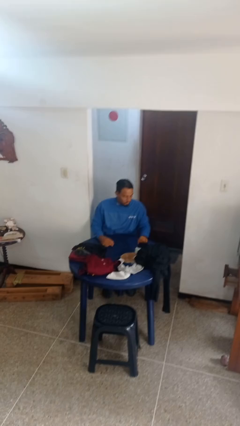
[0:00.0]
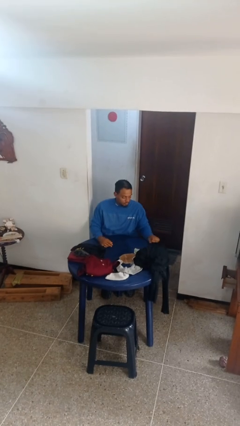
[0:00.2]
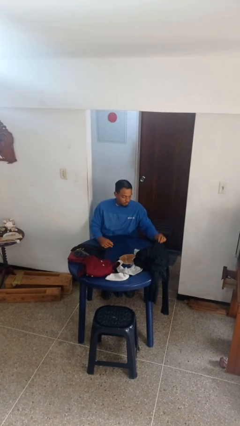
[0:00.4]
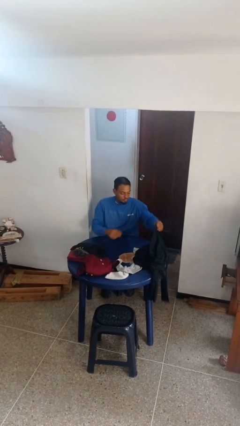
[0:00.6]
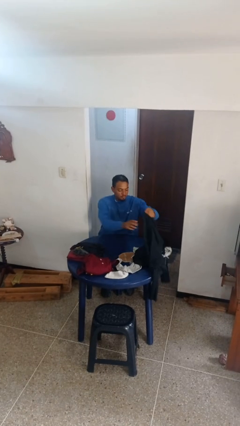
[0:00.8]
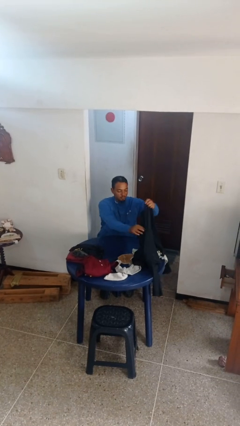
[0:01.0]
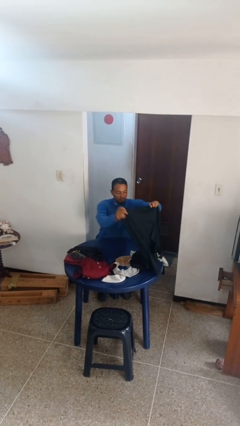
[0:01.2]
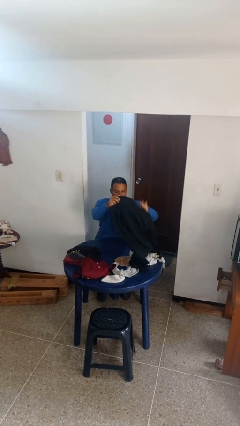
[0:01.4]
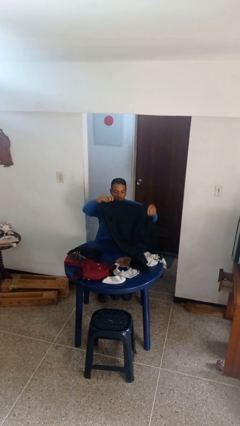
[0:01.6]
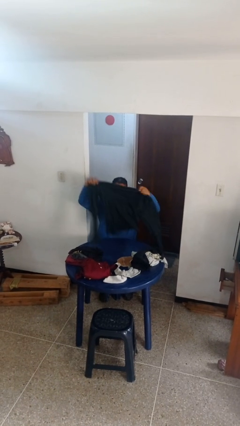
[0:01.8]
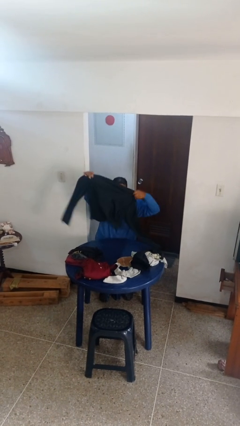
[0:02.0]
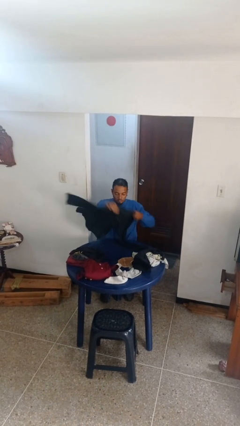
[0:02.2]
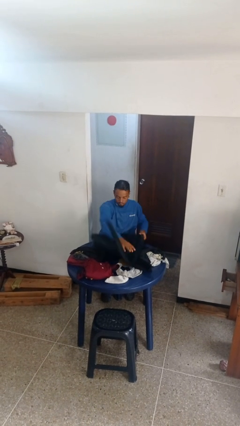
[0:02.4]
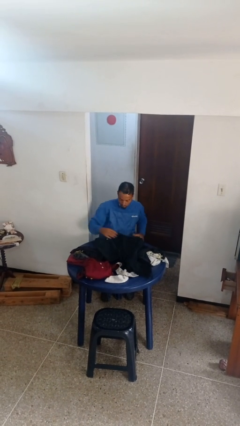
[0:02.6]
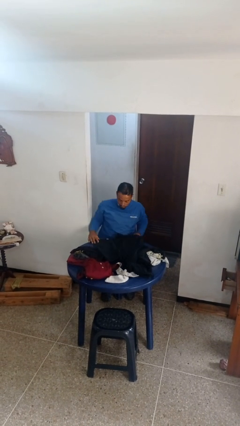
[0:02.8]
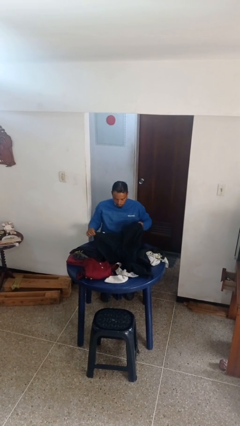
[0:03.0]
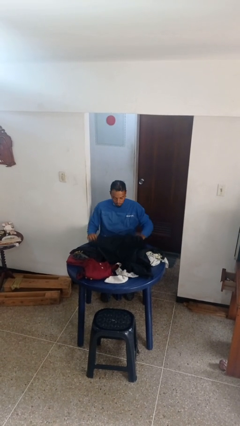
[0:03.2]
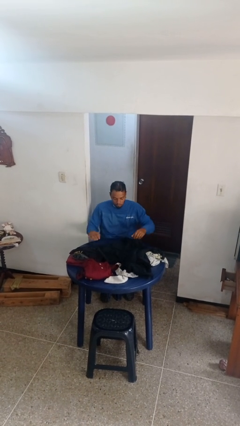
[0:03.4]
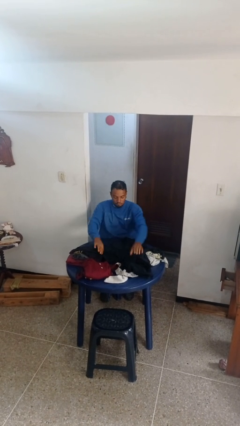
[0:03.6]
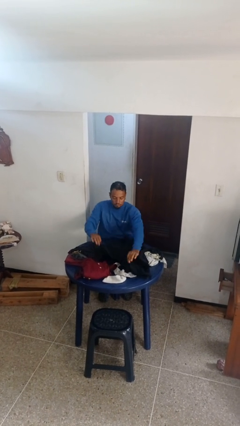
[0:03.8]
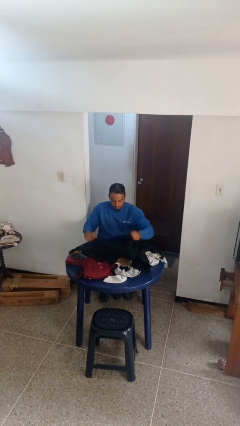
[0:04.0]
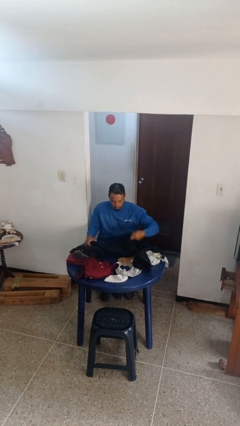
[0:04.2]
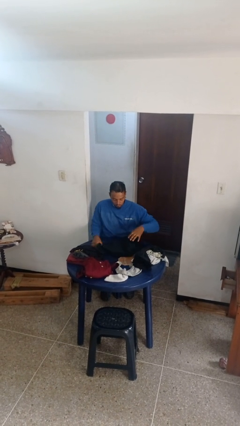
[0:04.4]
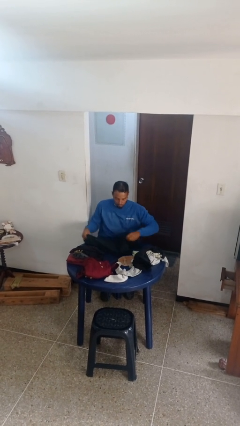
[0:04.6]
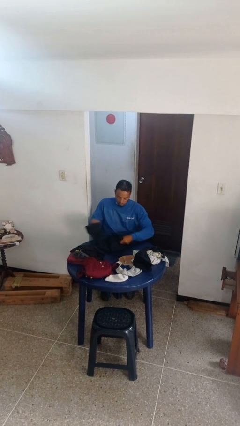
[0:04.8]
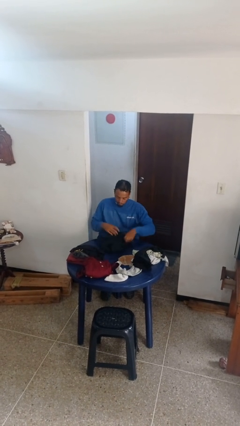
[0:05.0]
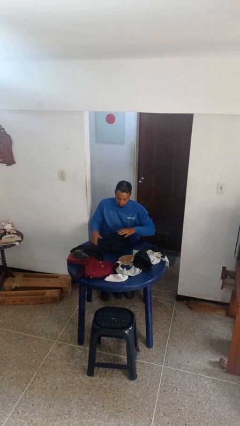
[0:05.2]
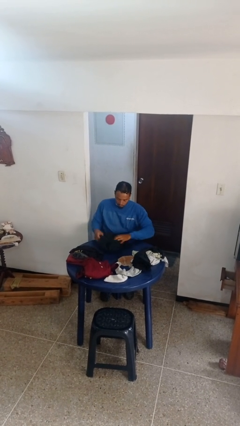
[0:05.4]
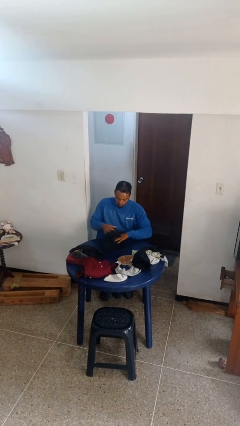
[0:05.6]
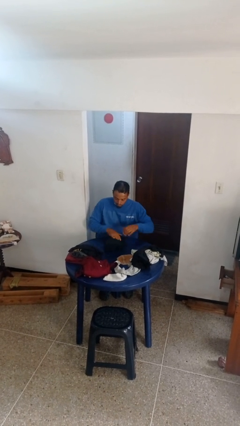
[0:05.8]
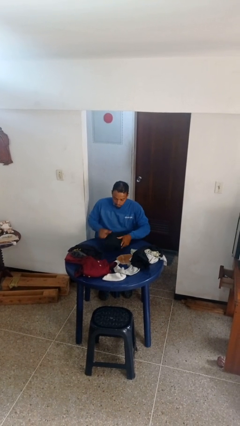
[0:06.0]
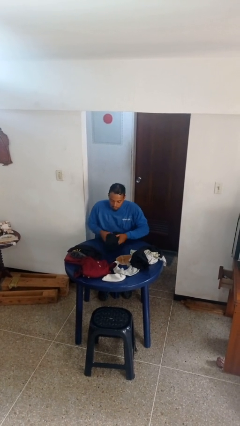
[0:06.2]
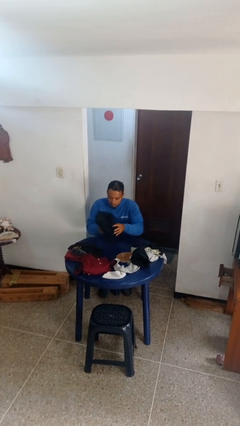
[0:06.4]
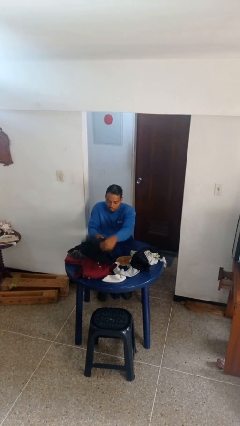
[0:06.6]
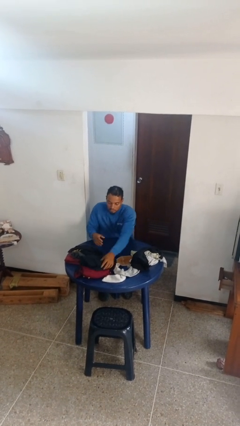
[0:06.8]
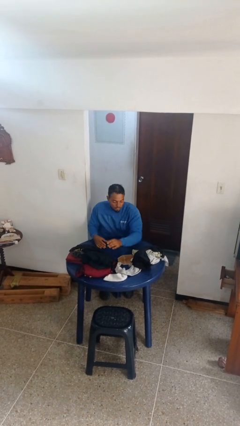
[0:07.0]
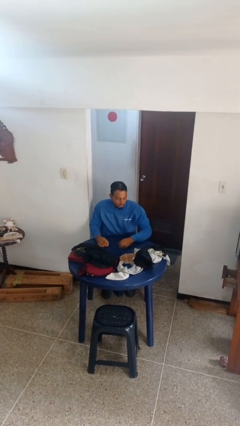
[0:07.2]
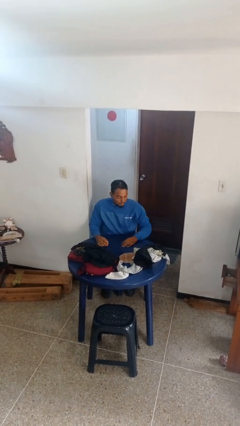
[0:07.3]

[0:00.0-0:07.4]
person folds shirt

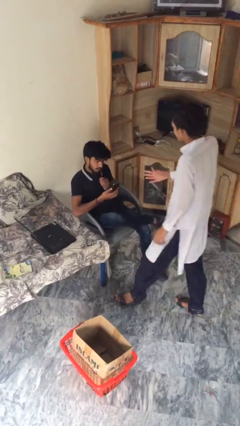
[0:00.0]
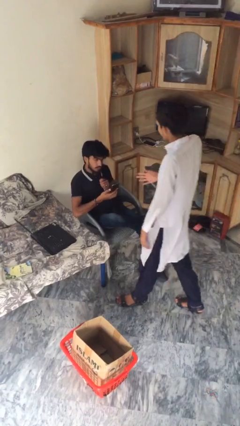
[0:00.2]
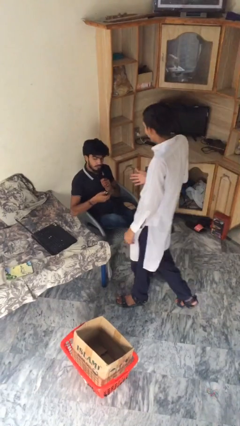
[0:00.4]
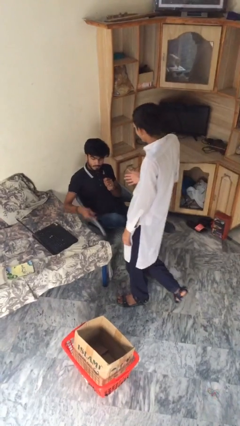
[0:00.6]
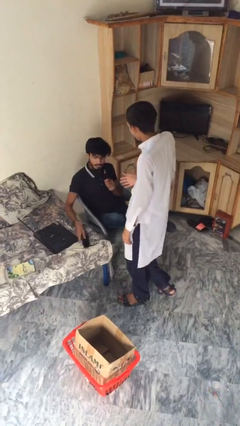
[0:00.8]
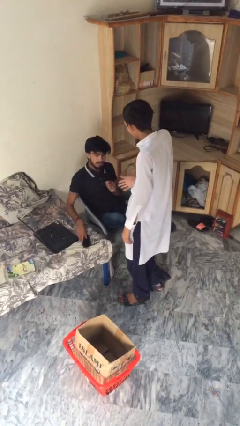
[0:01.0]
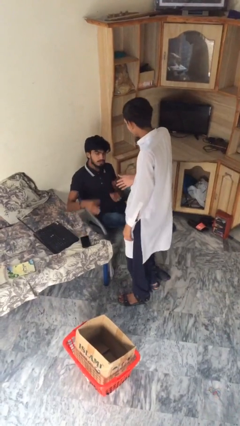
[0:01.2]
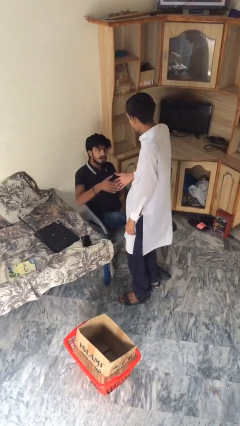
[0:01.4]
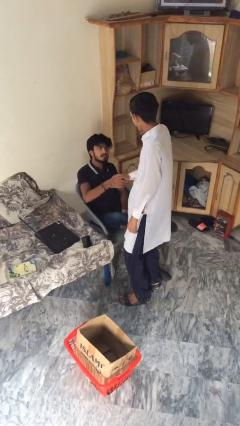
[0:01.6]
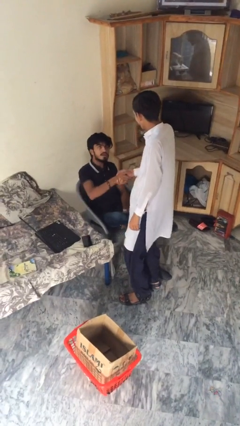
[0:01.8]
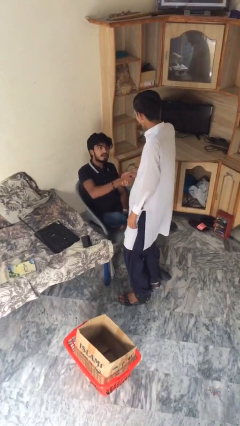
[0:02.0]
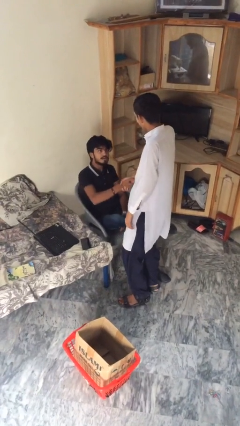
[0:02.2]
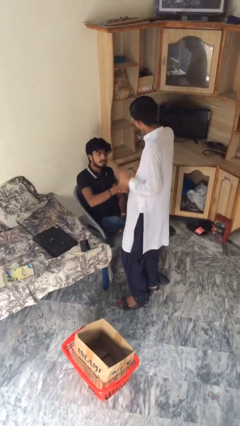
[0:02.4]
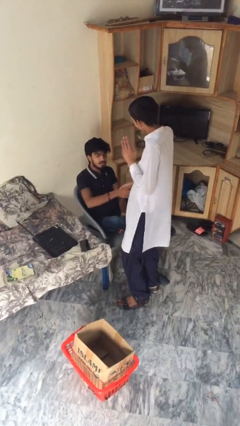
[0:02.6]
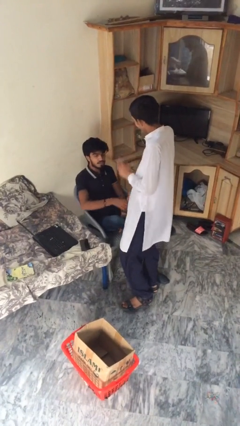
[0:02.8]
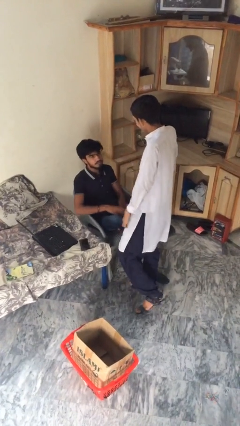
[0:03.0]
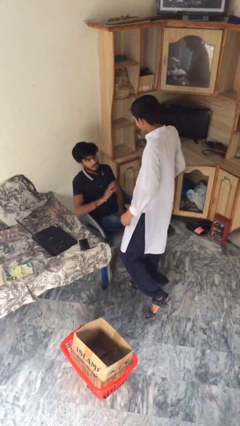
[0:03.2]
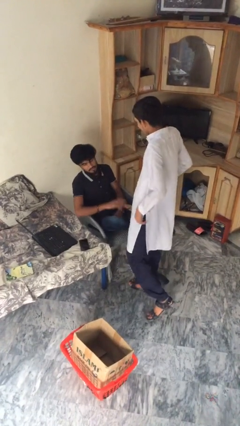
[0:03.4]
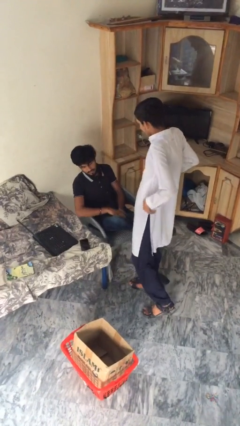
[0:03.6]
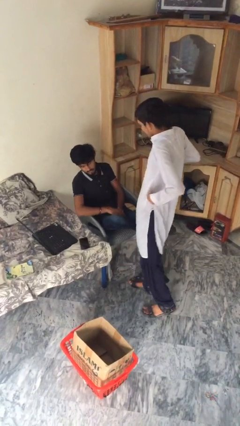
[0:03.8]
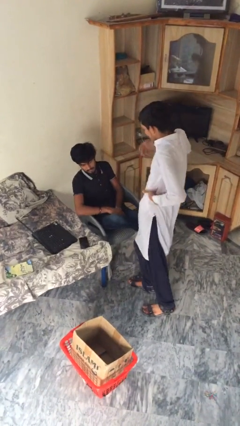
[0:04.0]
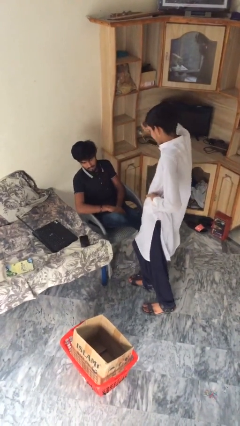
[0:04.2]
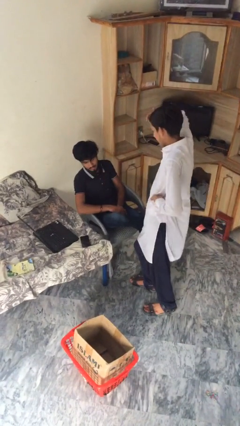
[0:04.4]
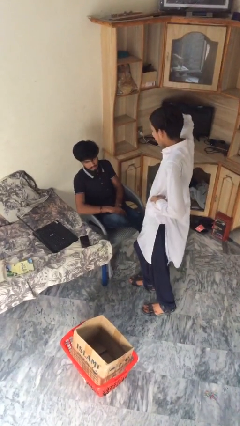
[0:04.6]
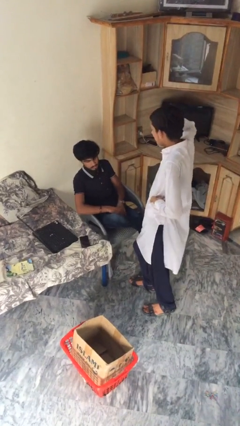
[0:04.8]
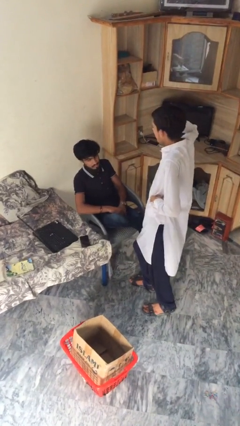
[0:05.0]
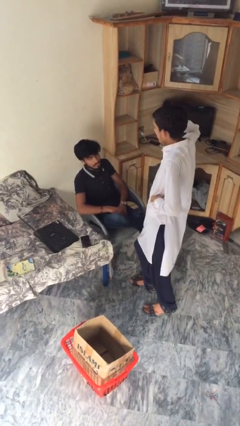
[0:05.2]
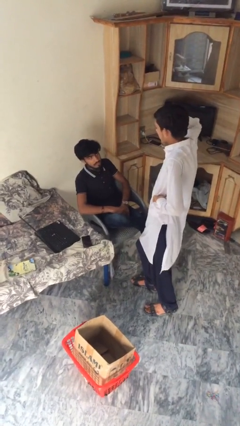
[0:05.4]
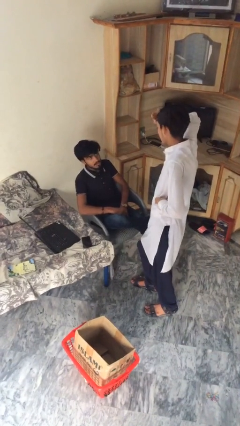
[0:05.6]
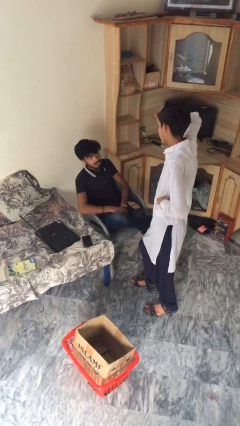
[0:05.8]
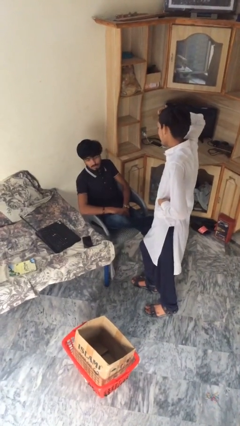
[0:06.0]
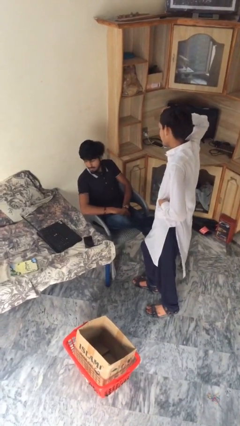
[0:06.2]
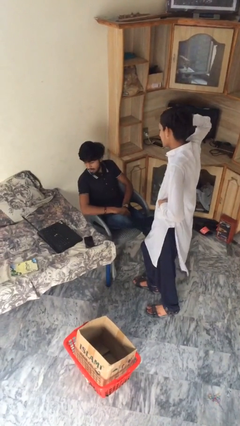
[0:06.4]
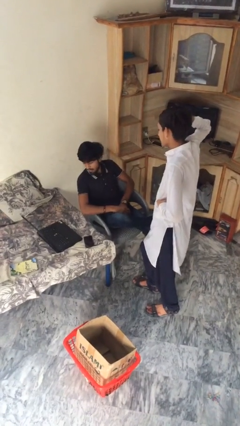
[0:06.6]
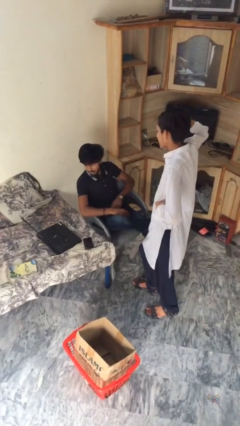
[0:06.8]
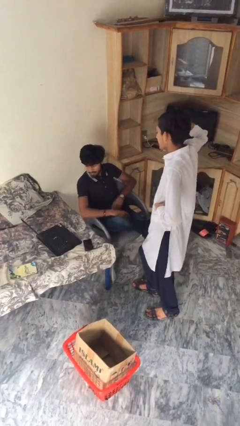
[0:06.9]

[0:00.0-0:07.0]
person shakes hand

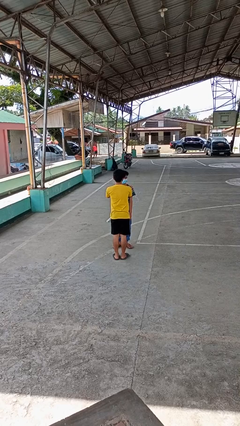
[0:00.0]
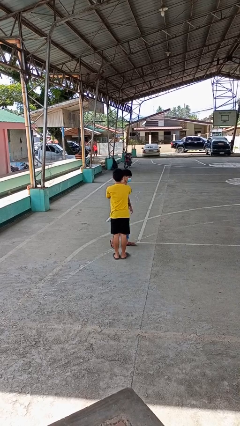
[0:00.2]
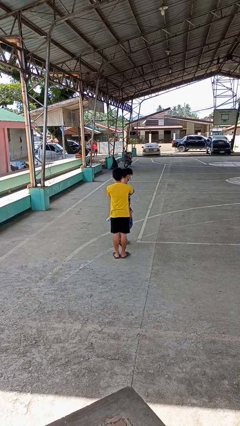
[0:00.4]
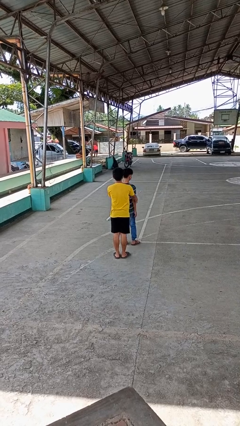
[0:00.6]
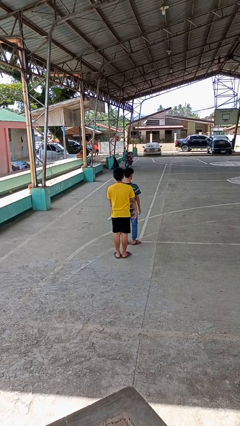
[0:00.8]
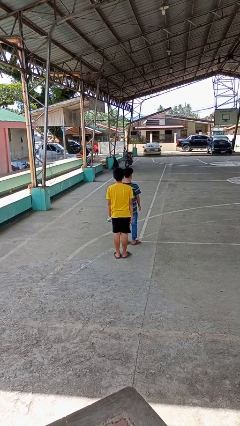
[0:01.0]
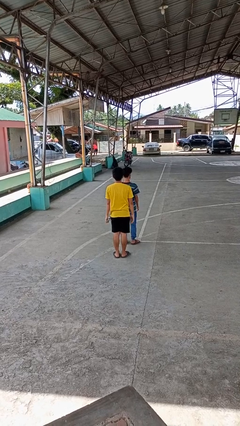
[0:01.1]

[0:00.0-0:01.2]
person spins person around

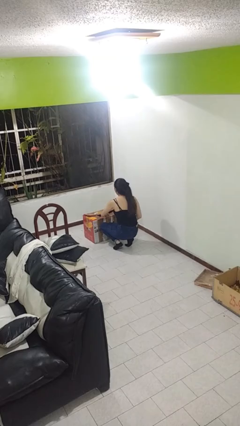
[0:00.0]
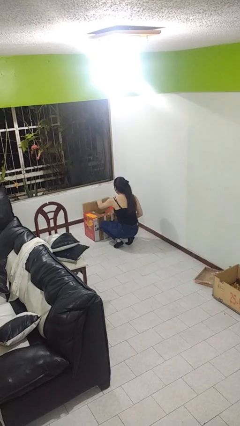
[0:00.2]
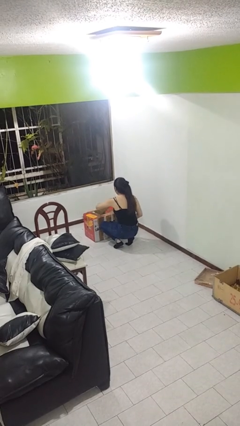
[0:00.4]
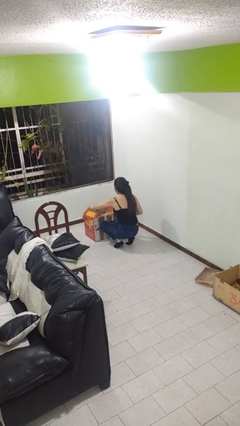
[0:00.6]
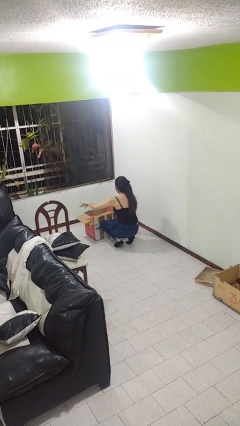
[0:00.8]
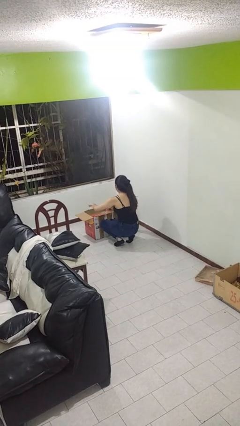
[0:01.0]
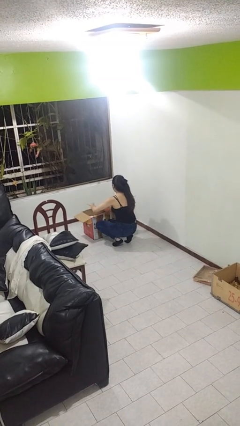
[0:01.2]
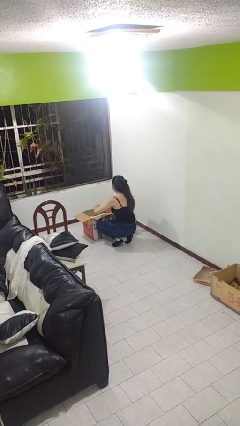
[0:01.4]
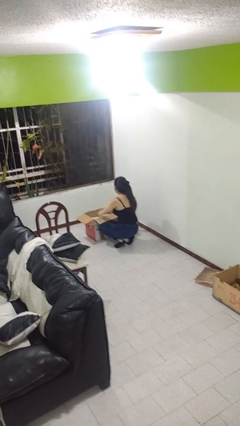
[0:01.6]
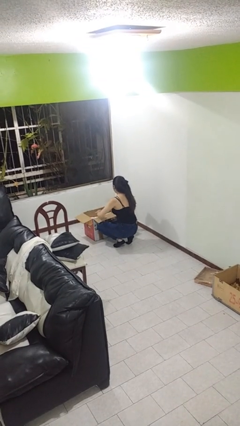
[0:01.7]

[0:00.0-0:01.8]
person opens box

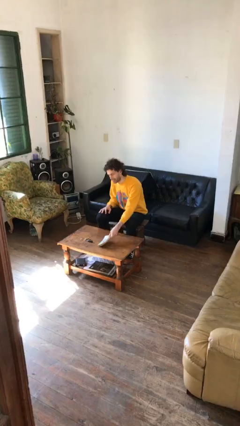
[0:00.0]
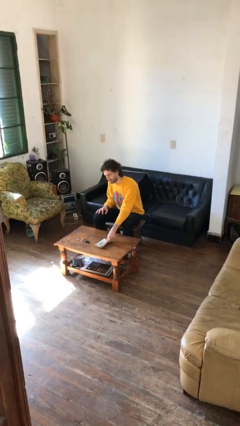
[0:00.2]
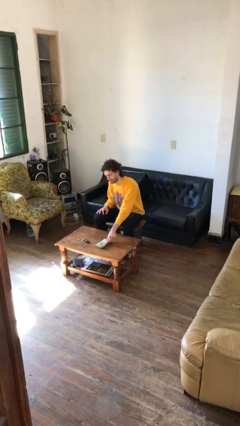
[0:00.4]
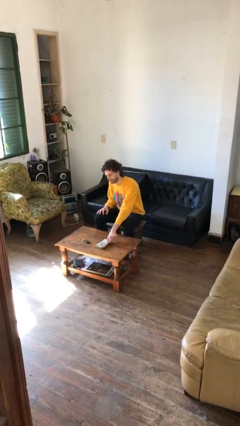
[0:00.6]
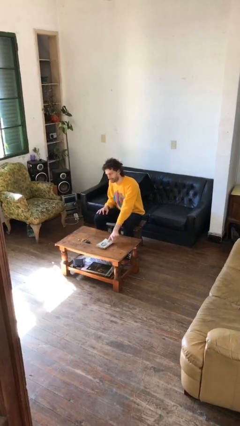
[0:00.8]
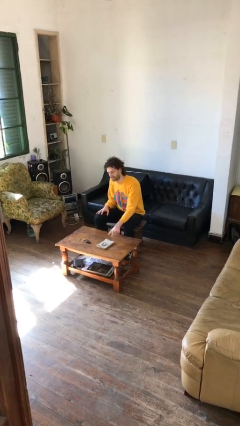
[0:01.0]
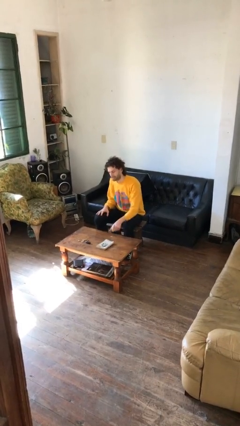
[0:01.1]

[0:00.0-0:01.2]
person puts down object on table
